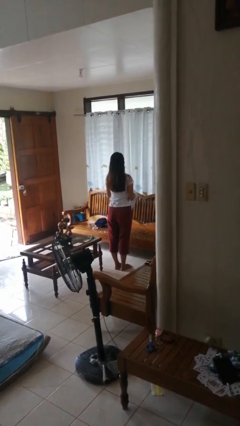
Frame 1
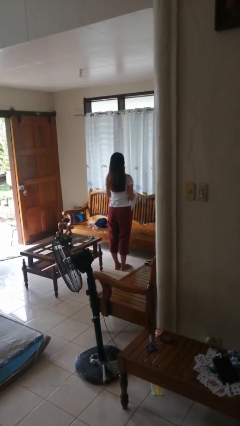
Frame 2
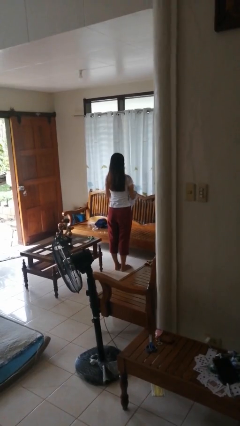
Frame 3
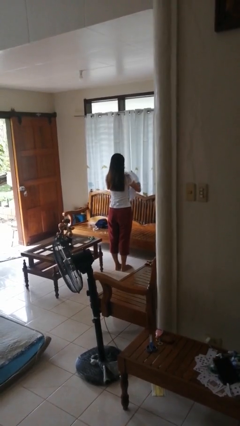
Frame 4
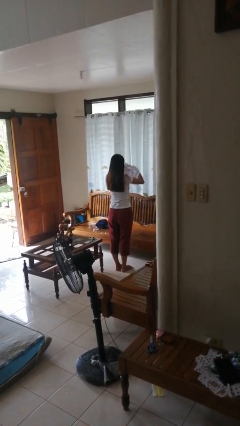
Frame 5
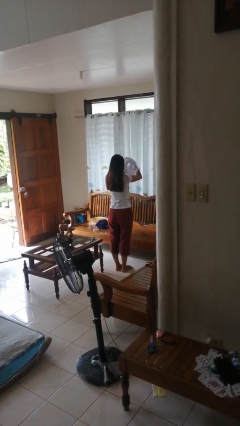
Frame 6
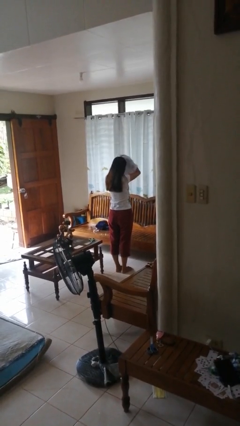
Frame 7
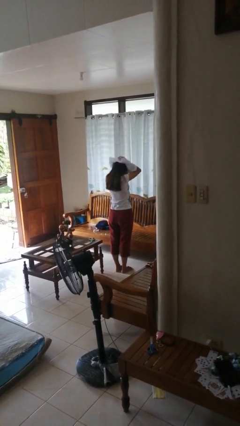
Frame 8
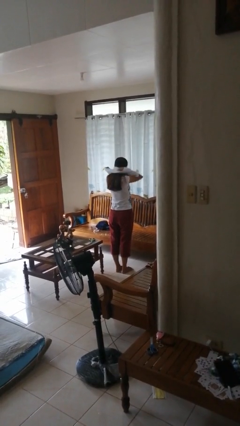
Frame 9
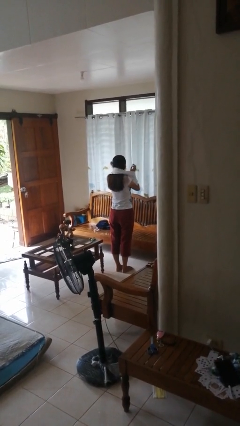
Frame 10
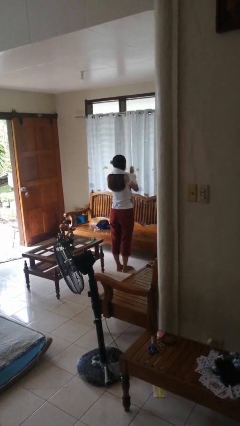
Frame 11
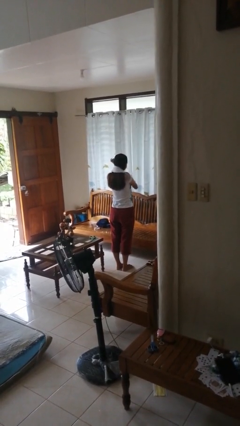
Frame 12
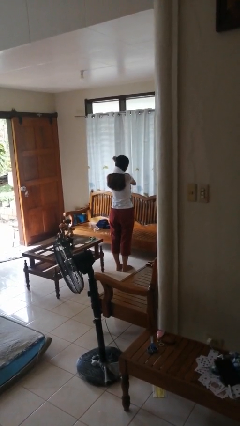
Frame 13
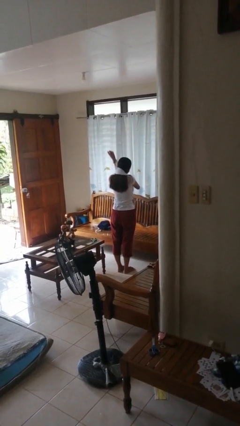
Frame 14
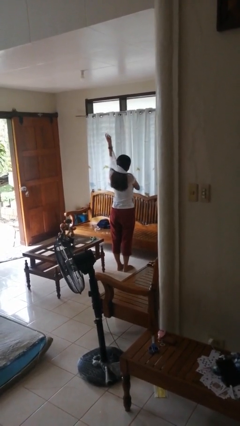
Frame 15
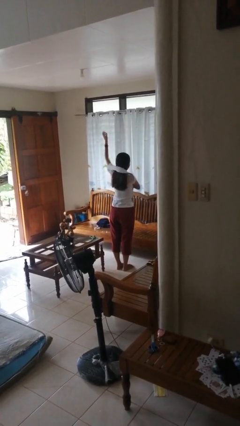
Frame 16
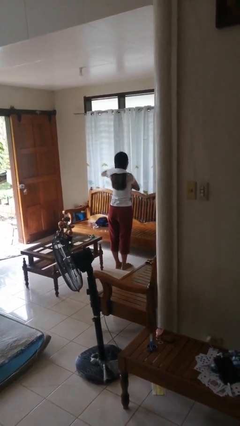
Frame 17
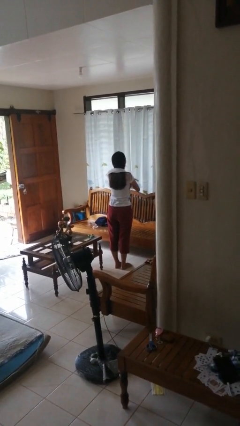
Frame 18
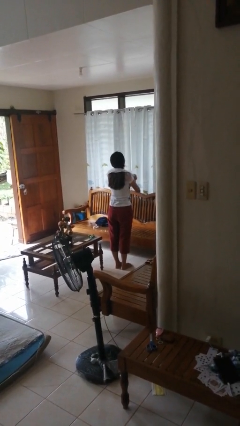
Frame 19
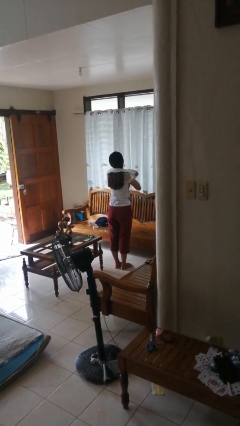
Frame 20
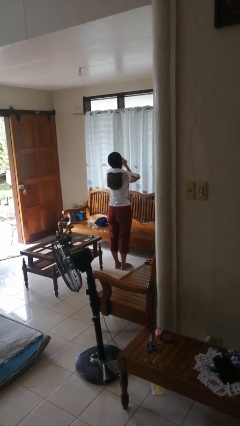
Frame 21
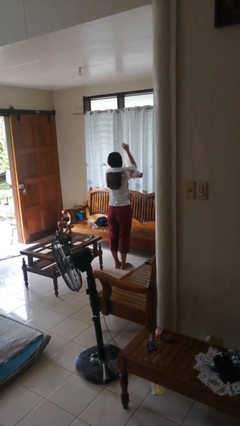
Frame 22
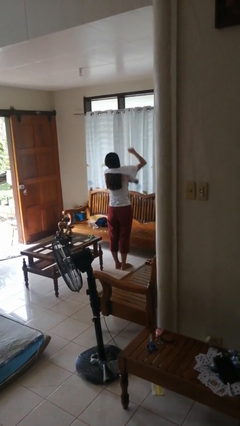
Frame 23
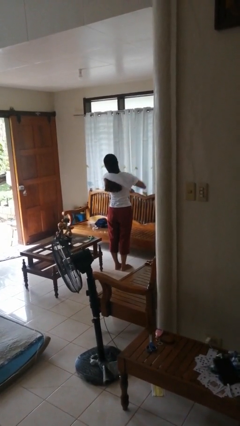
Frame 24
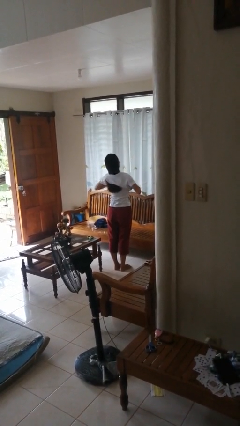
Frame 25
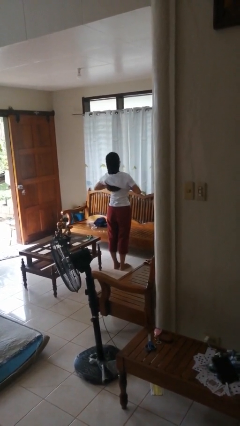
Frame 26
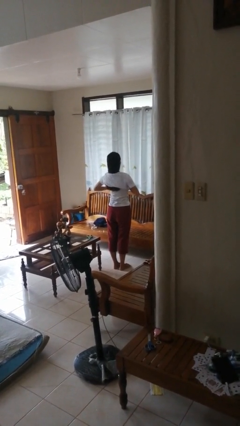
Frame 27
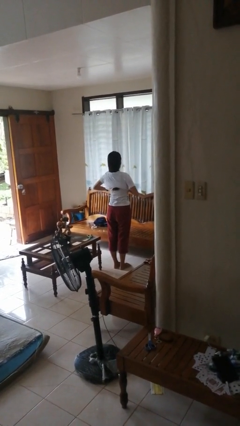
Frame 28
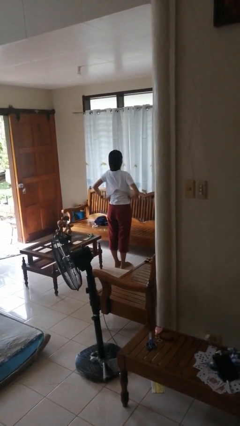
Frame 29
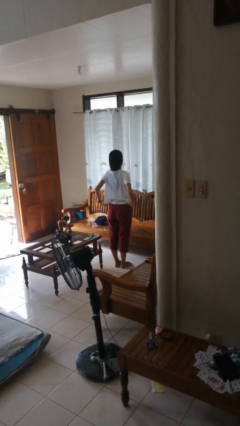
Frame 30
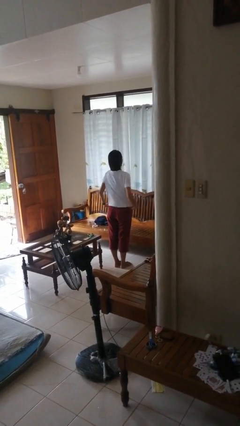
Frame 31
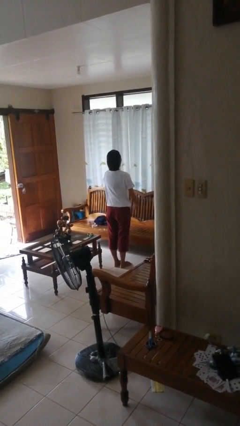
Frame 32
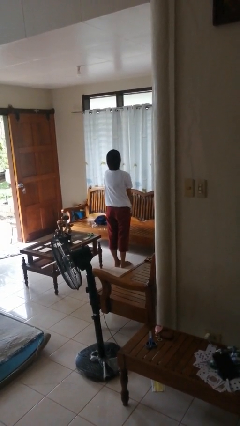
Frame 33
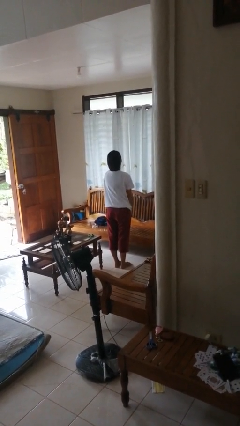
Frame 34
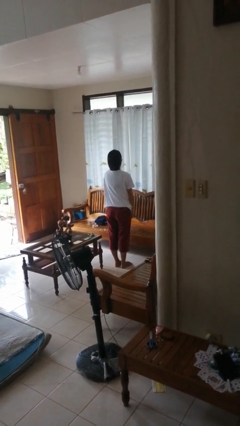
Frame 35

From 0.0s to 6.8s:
person puts on shirt

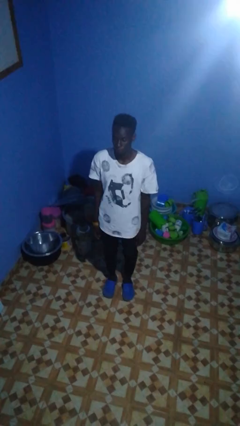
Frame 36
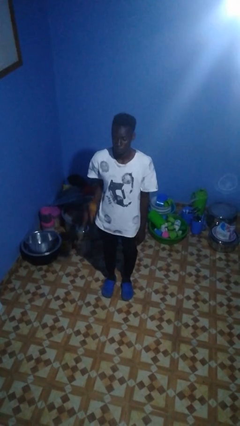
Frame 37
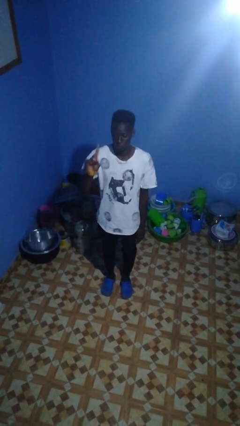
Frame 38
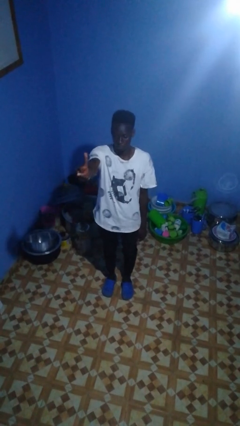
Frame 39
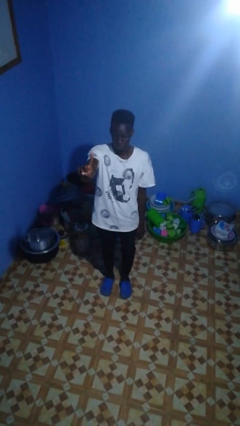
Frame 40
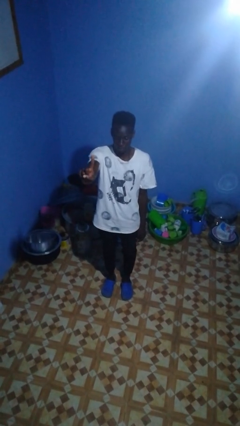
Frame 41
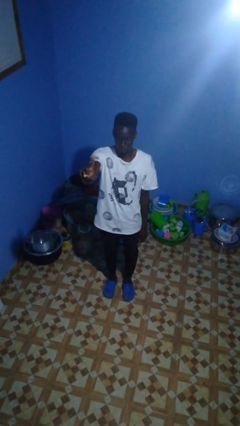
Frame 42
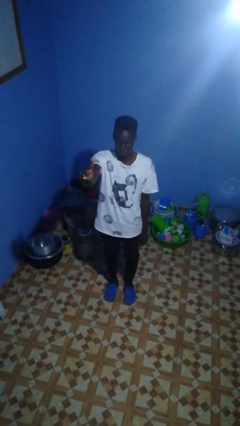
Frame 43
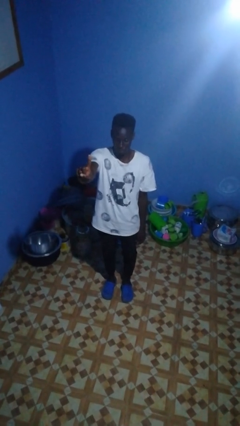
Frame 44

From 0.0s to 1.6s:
person gestures number one

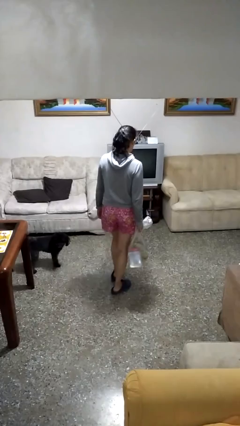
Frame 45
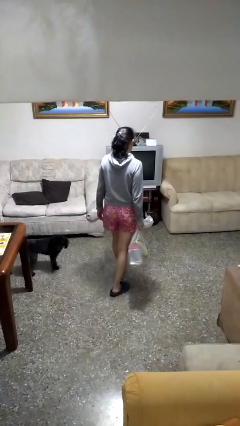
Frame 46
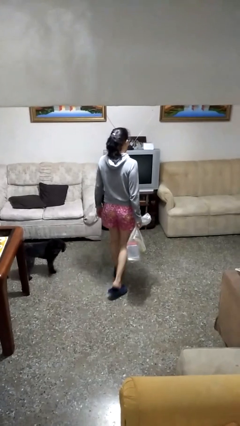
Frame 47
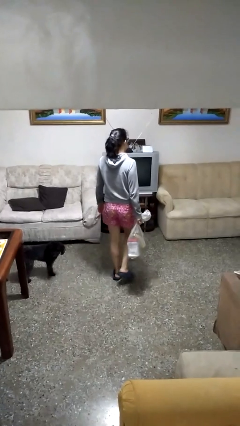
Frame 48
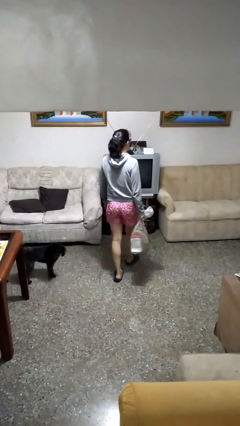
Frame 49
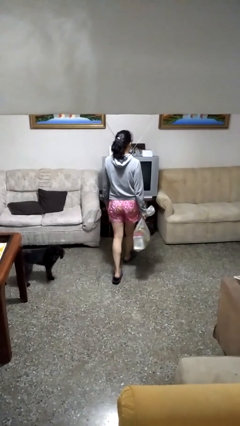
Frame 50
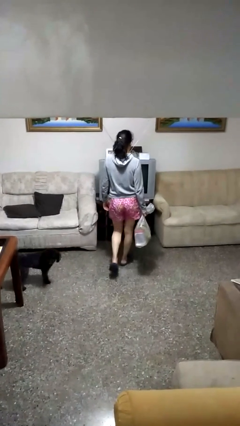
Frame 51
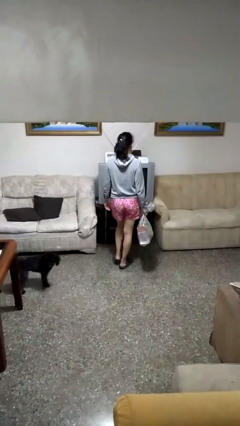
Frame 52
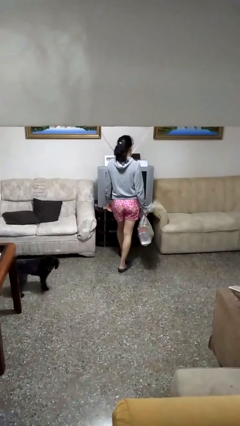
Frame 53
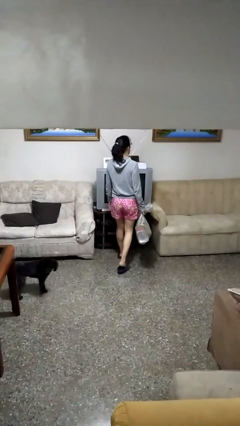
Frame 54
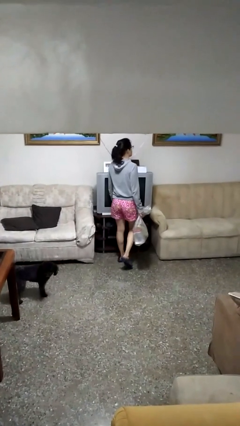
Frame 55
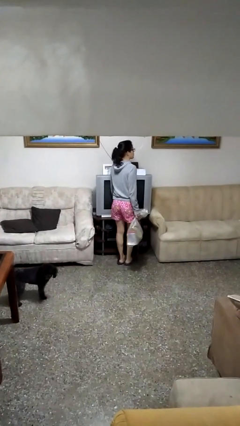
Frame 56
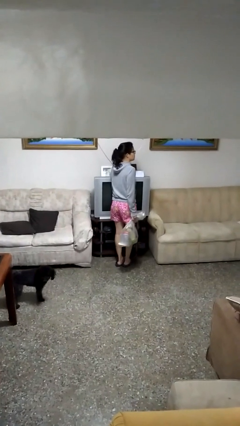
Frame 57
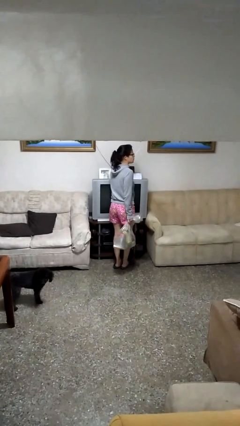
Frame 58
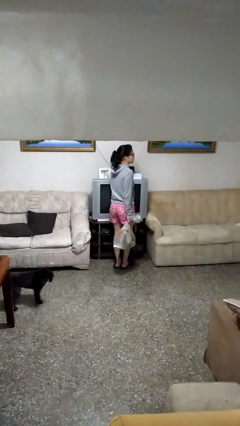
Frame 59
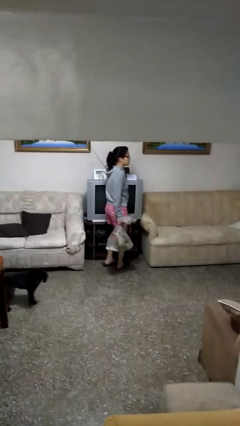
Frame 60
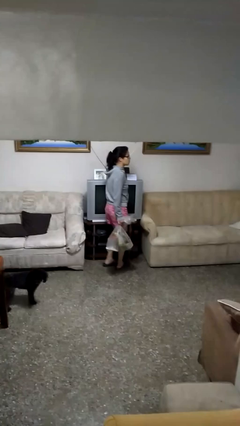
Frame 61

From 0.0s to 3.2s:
person carries groceries

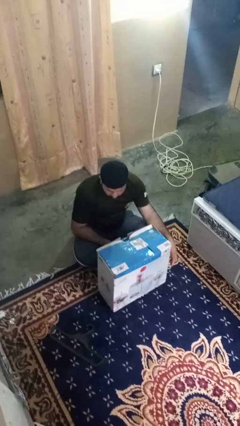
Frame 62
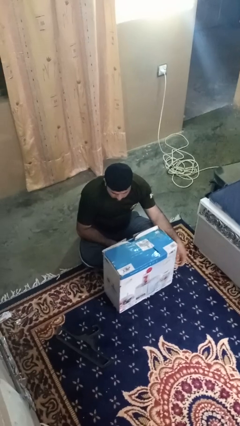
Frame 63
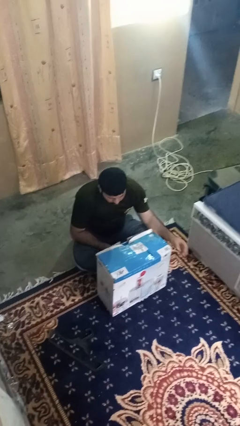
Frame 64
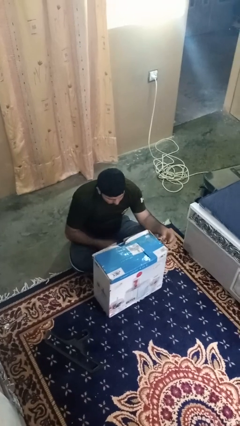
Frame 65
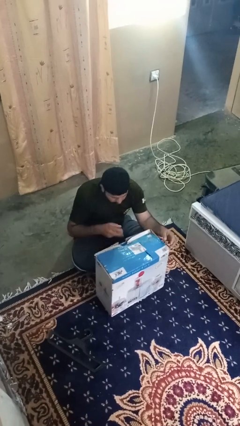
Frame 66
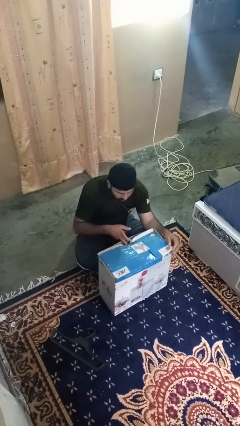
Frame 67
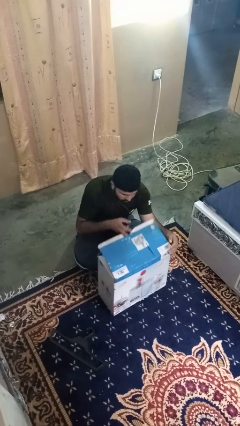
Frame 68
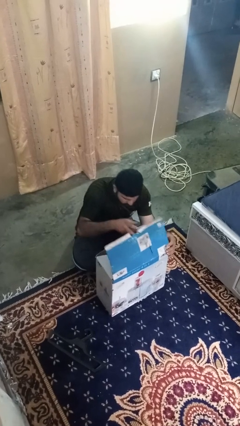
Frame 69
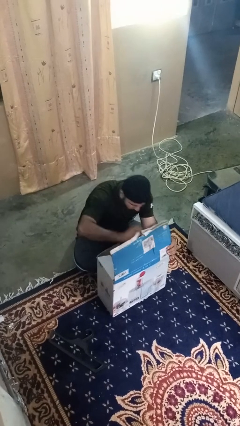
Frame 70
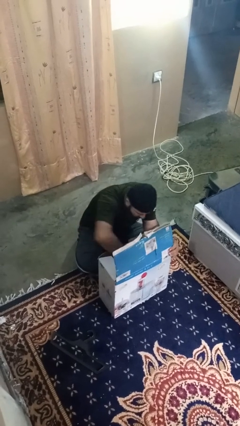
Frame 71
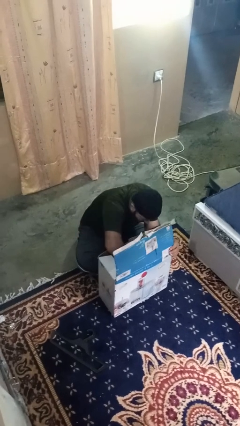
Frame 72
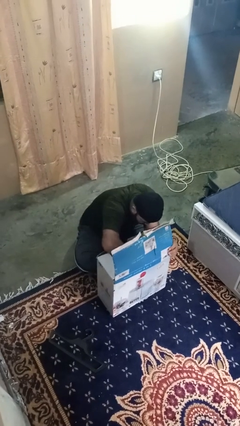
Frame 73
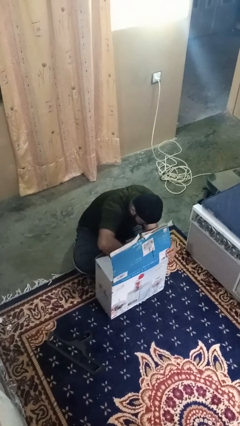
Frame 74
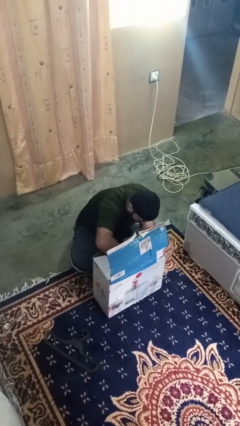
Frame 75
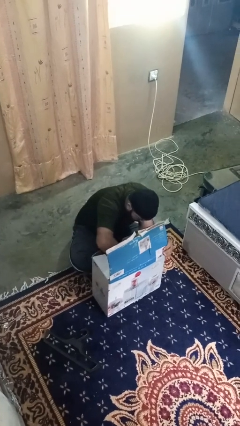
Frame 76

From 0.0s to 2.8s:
person searches in box

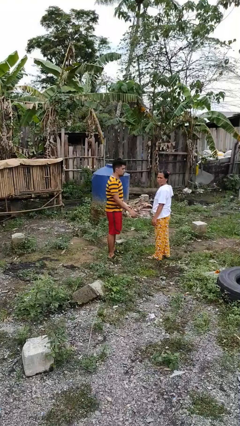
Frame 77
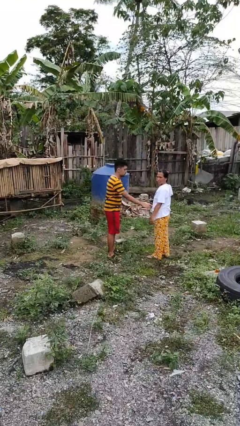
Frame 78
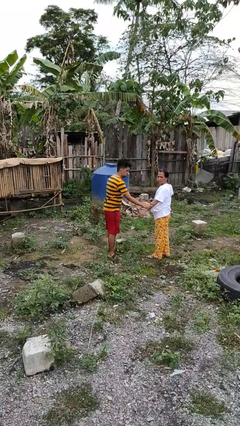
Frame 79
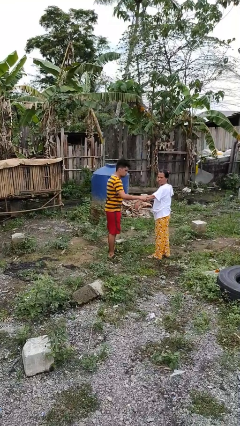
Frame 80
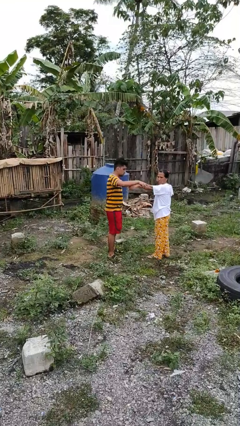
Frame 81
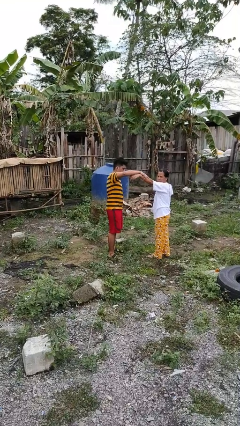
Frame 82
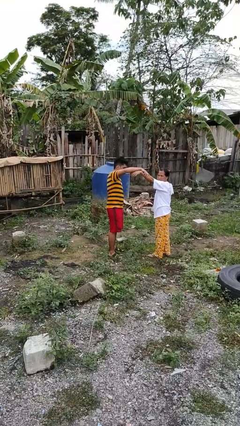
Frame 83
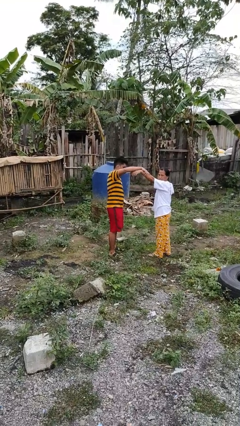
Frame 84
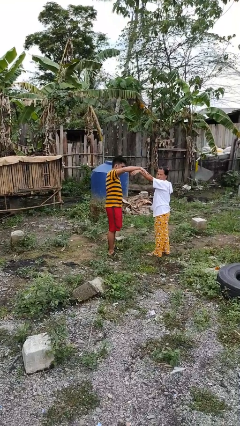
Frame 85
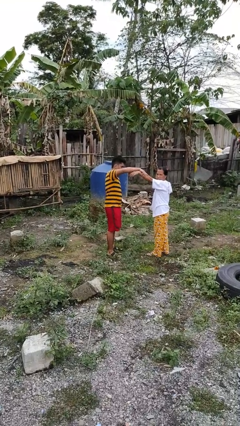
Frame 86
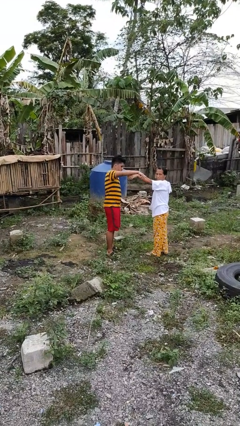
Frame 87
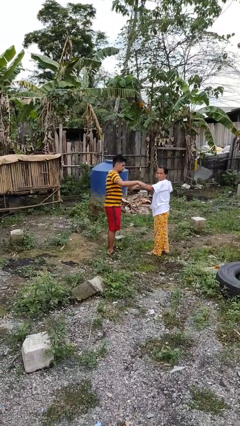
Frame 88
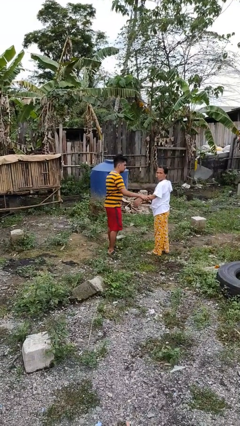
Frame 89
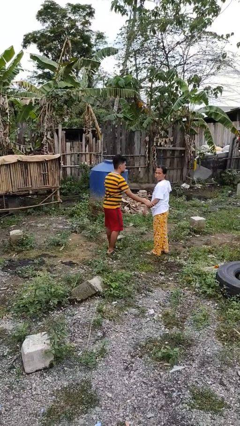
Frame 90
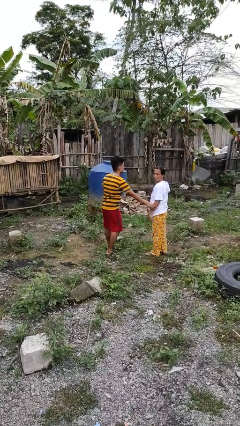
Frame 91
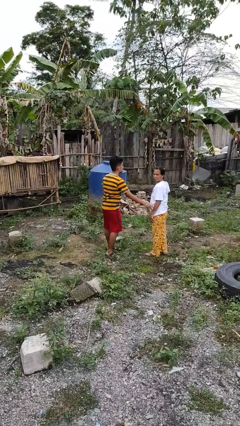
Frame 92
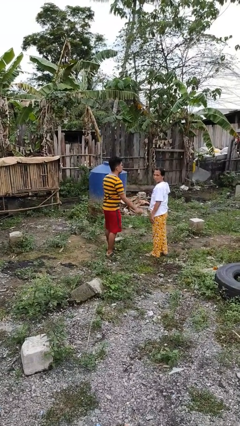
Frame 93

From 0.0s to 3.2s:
person grabs person by forearm
